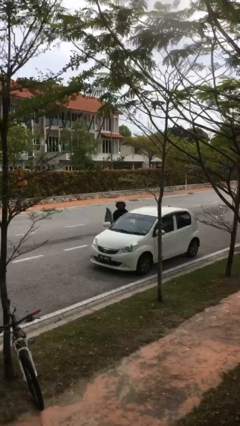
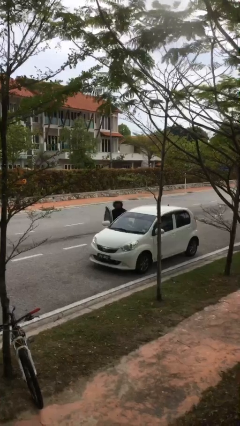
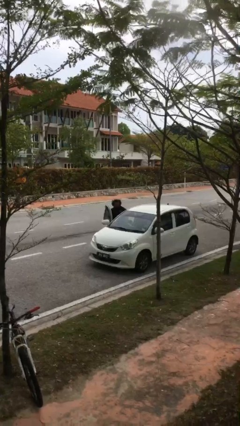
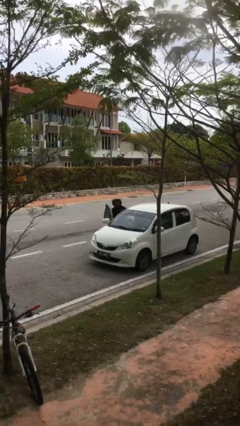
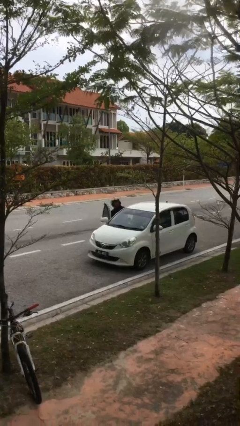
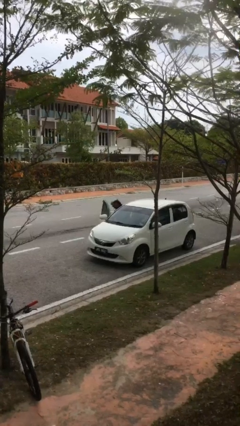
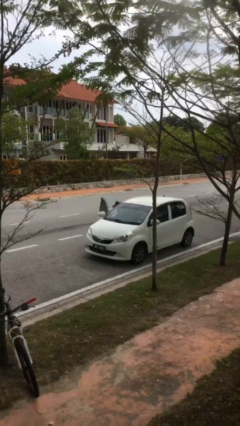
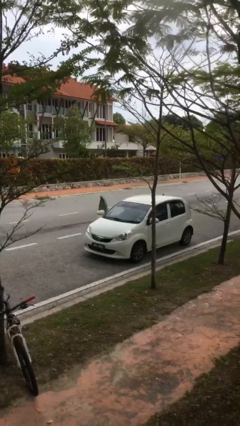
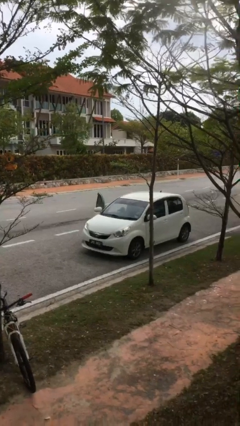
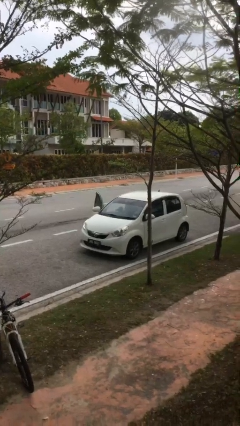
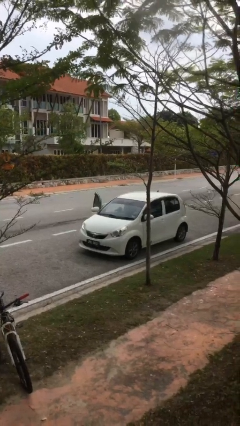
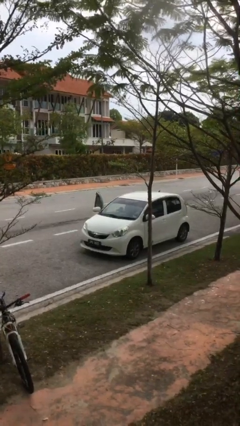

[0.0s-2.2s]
person enters car

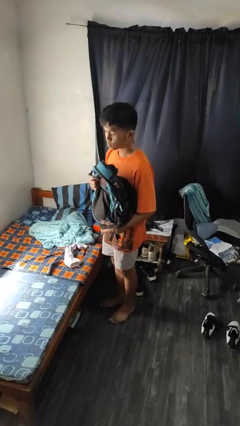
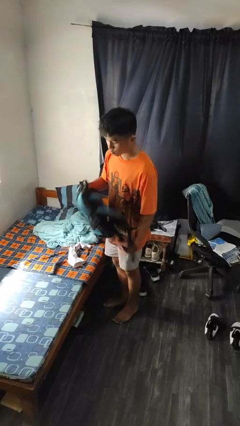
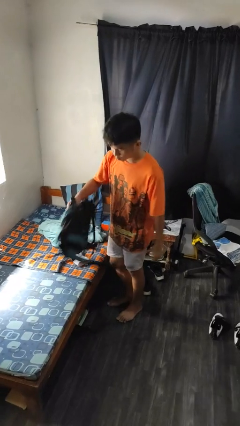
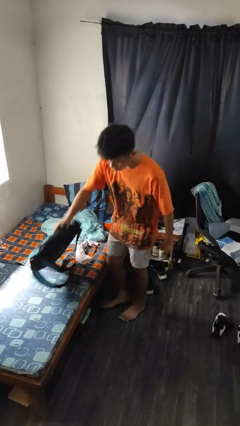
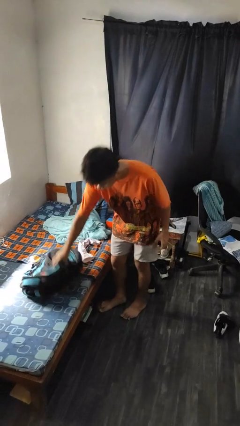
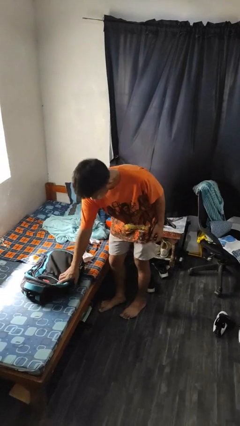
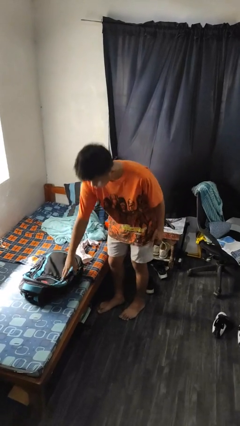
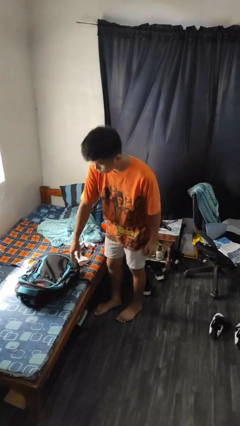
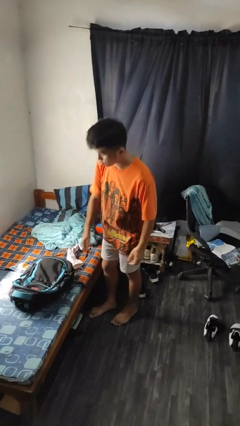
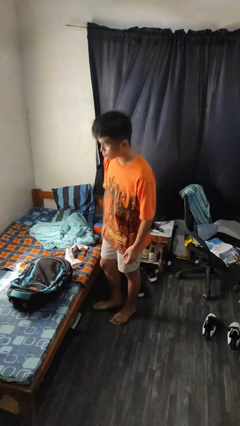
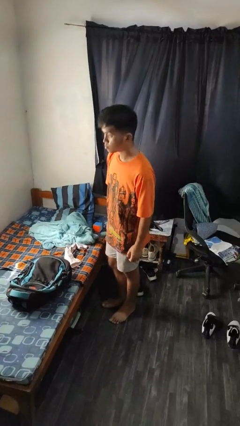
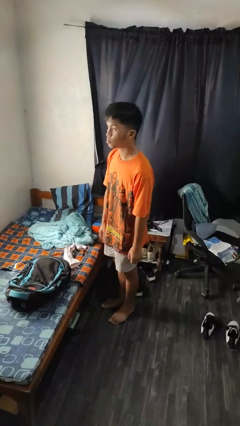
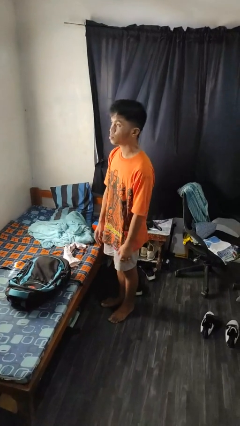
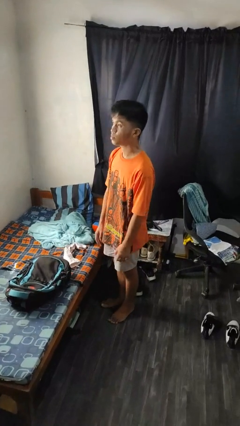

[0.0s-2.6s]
person puts down object on bed

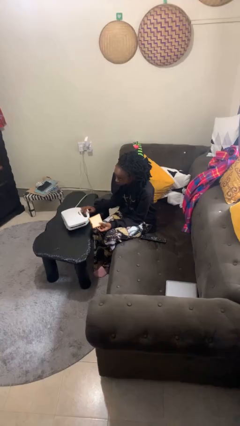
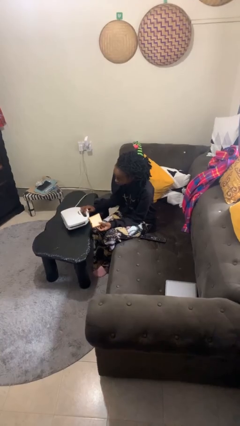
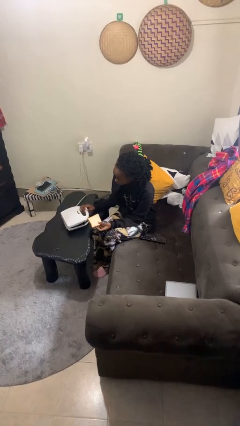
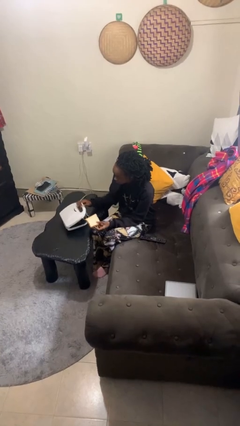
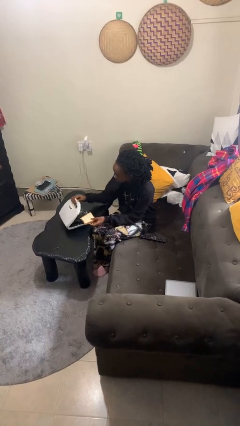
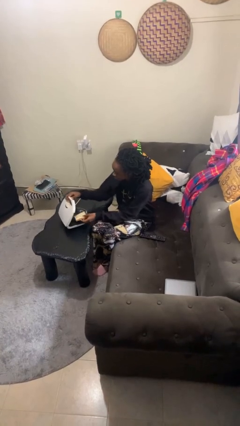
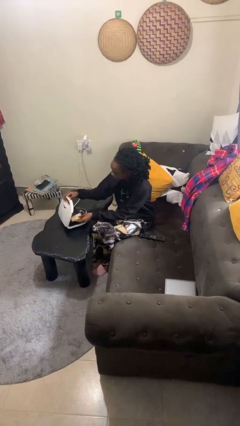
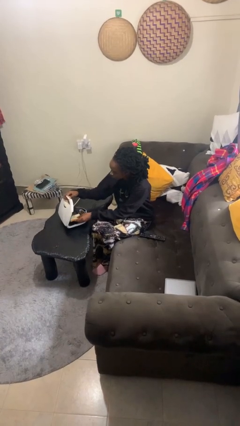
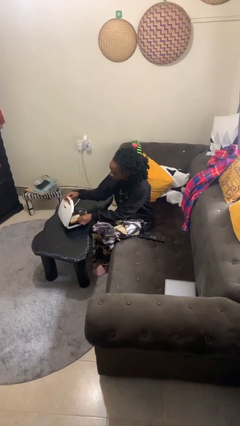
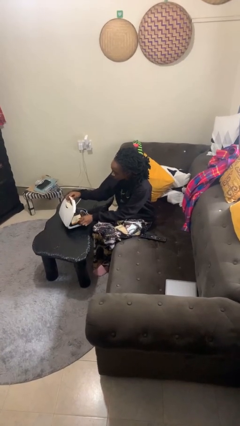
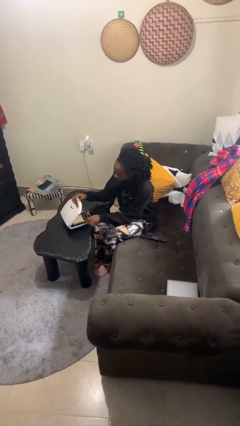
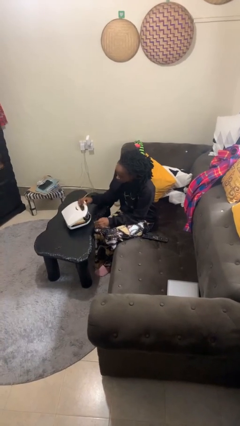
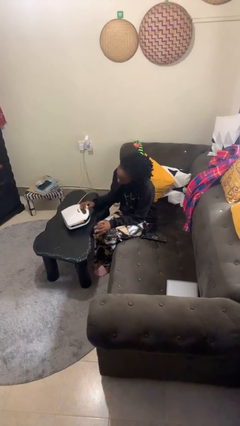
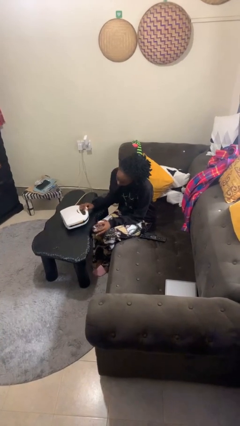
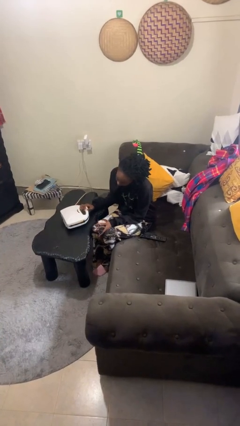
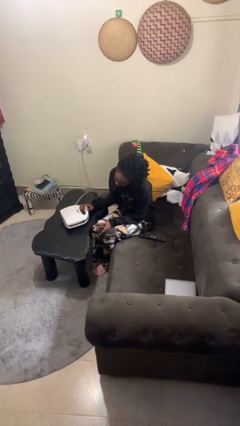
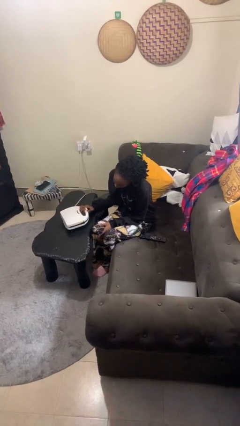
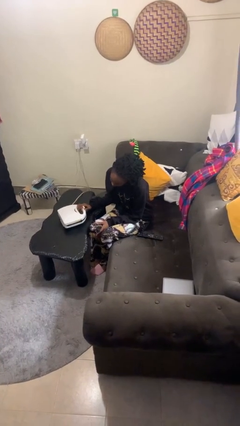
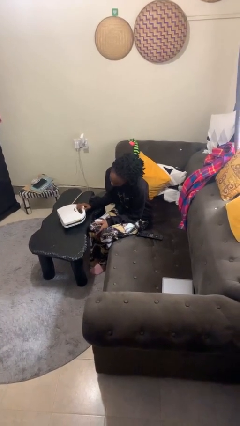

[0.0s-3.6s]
person puts object into toaster

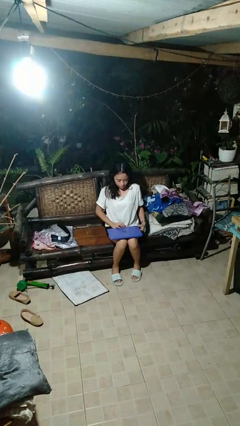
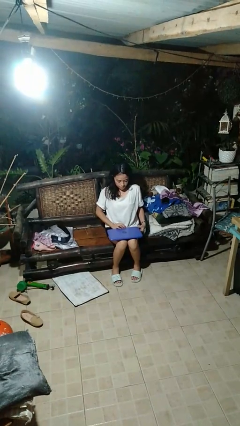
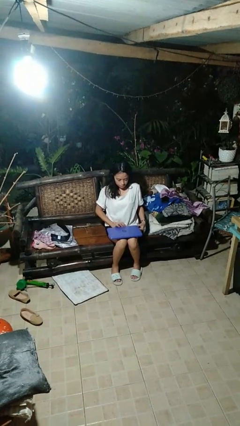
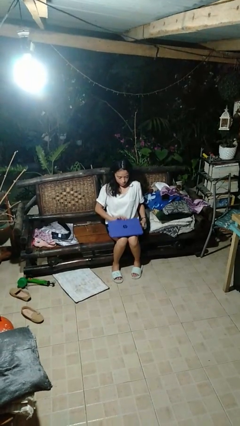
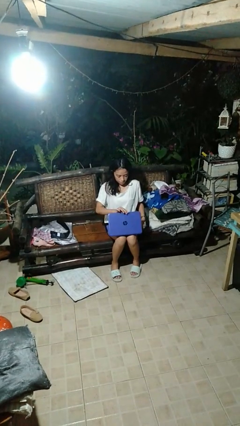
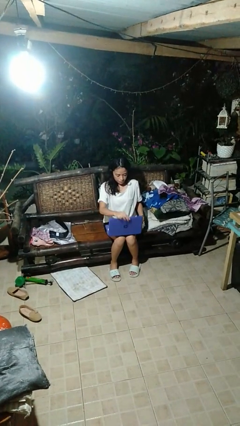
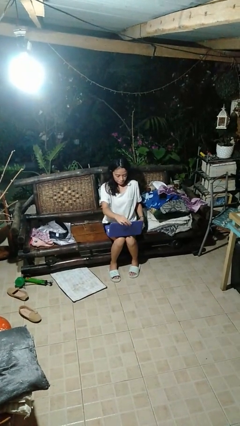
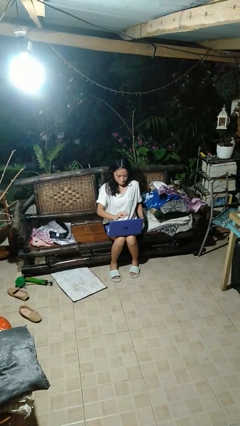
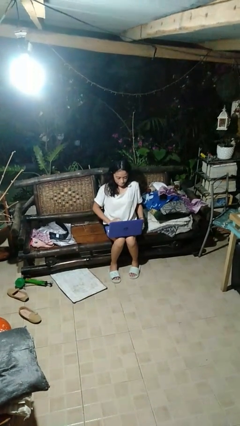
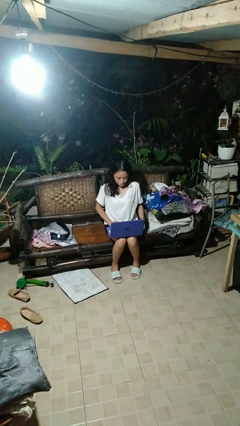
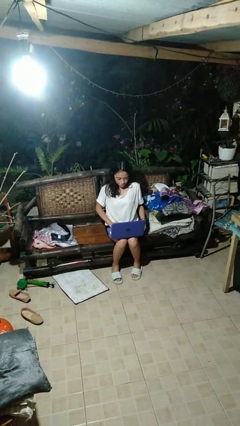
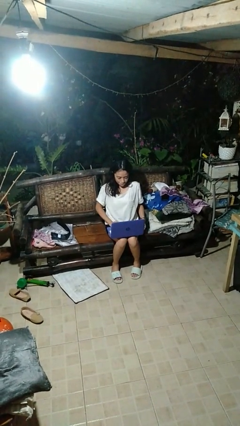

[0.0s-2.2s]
person opens laptop

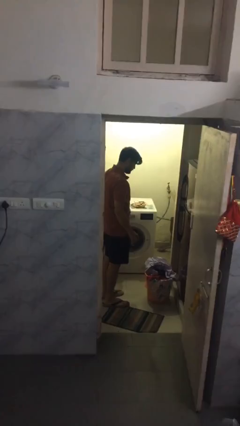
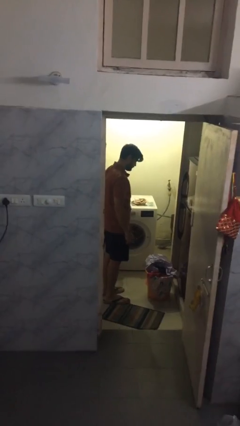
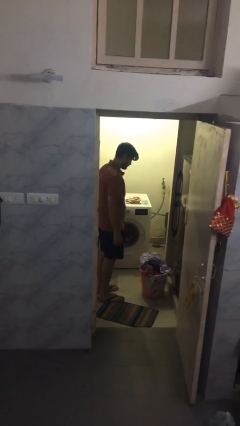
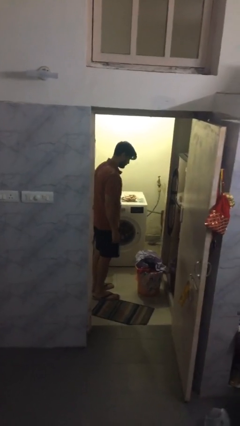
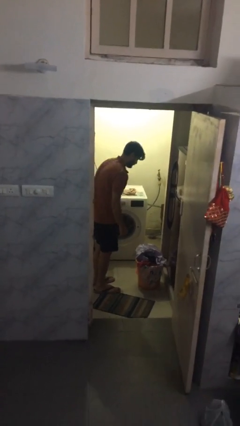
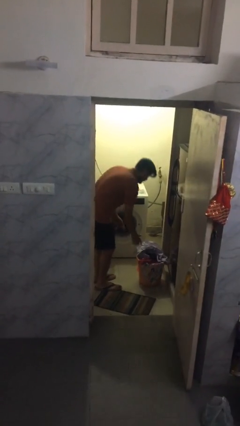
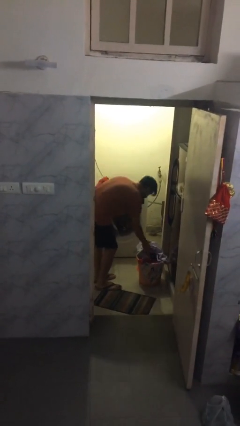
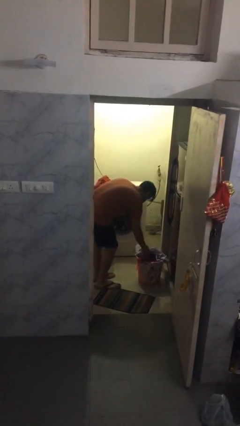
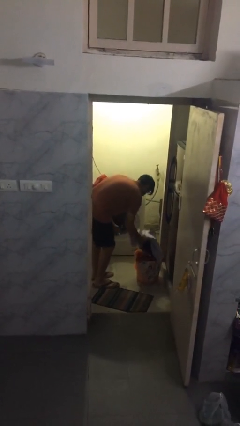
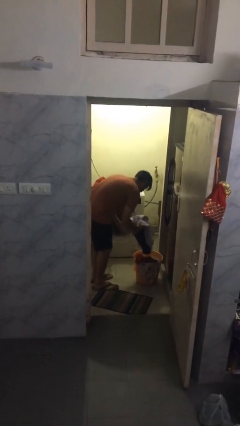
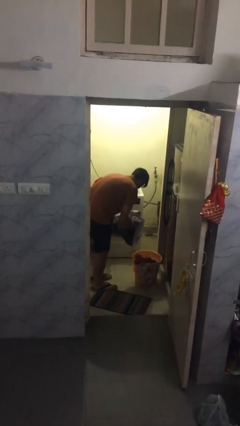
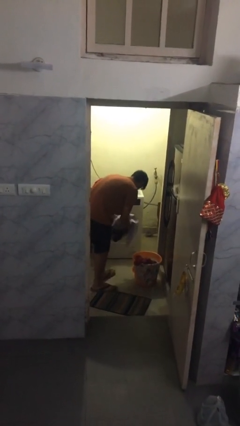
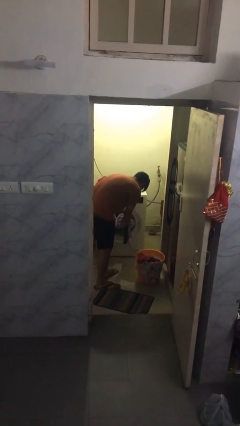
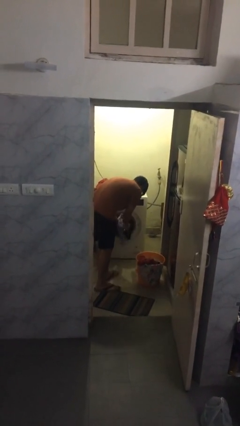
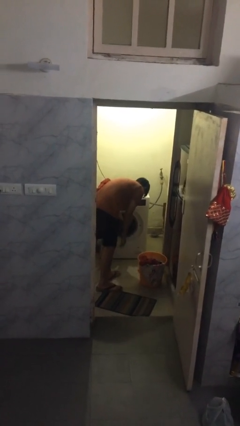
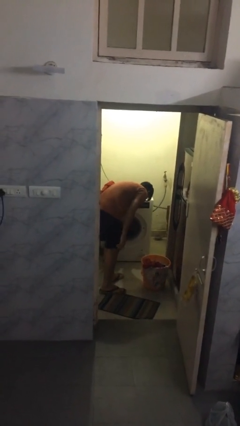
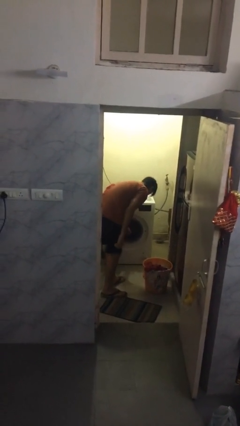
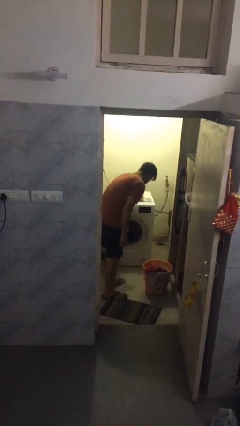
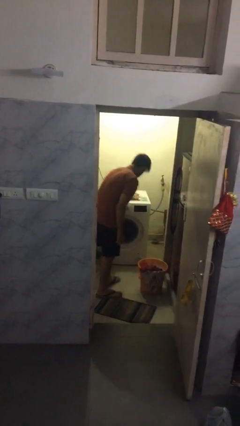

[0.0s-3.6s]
person loads dryer

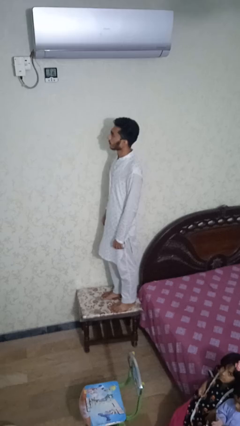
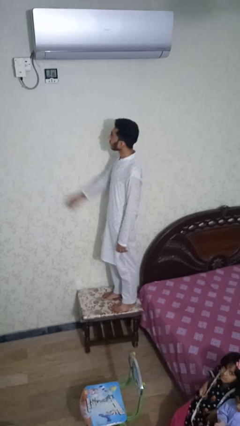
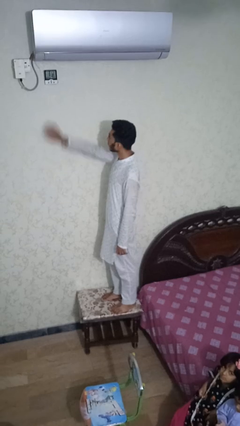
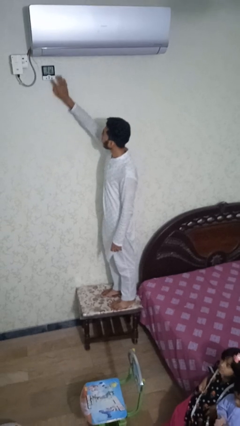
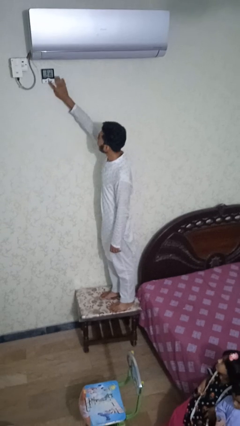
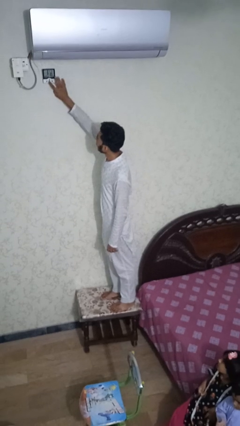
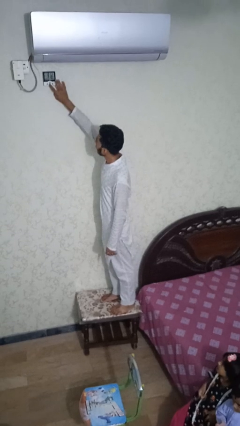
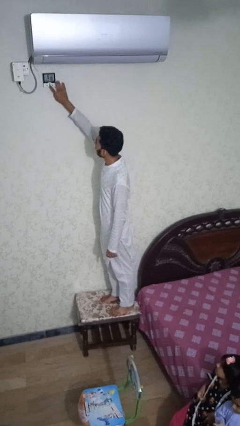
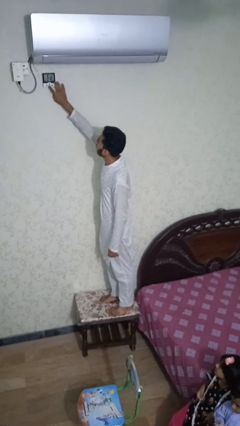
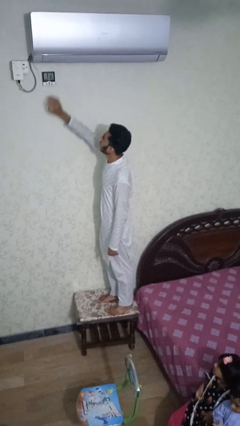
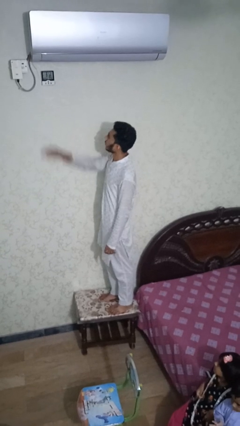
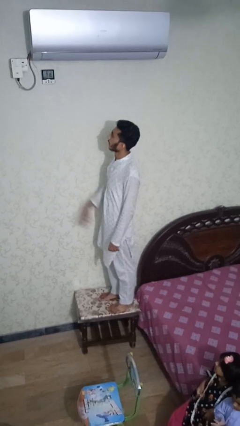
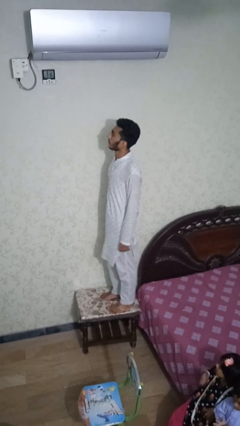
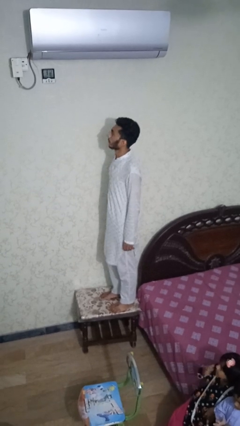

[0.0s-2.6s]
person adjusts thermostat

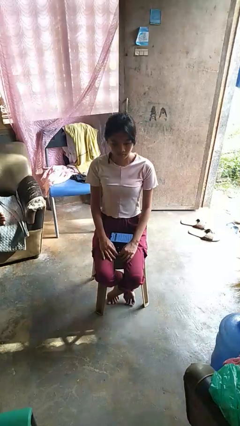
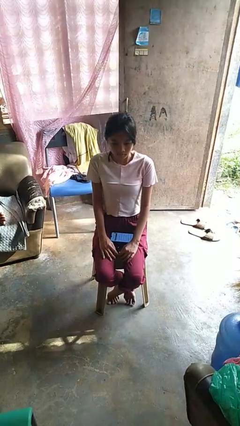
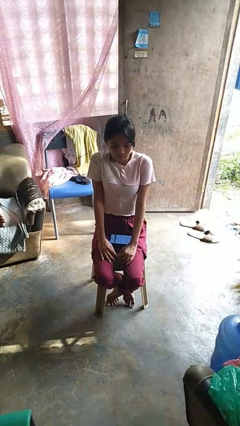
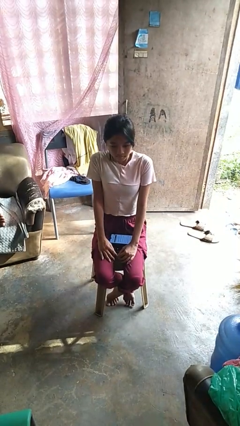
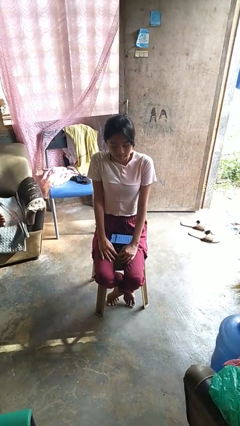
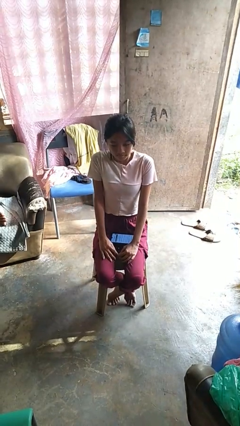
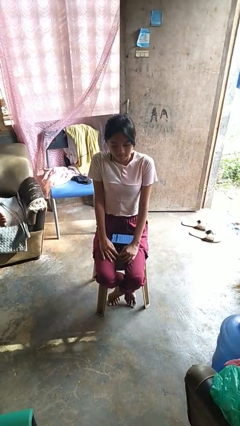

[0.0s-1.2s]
person shrugs
